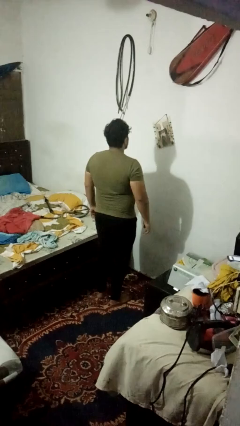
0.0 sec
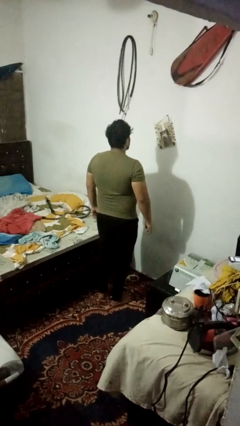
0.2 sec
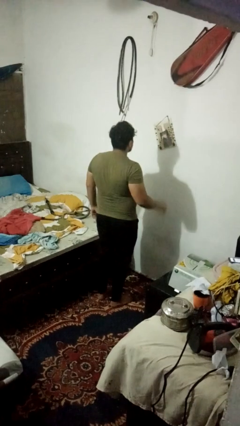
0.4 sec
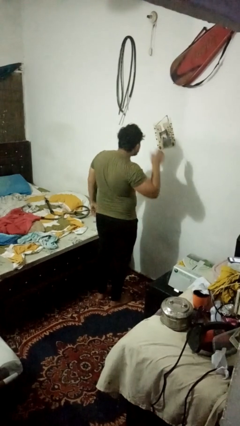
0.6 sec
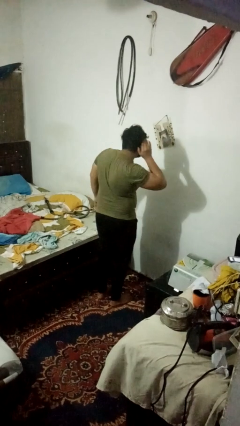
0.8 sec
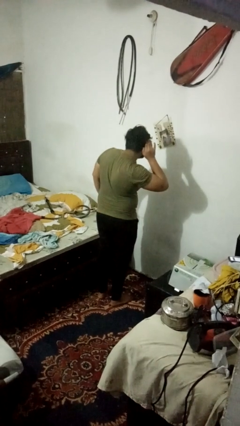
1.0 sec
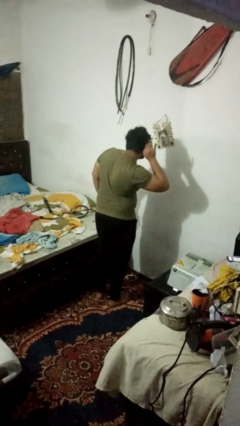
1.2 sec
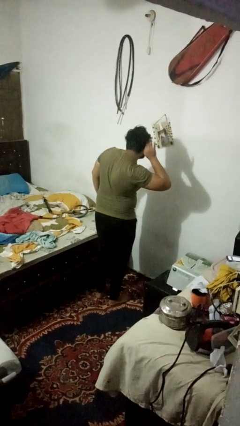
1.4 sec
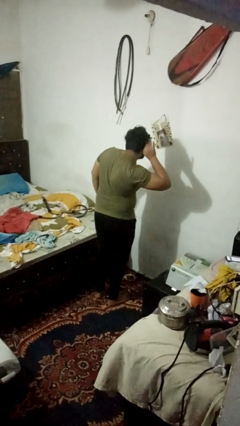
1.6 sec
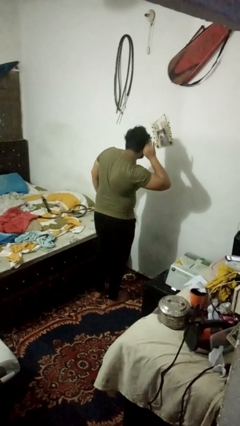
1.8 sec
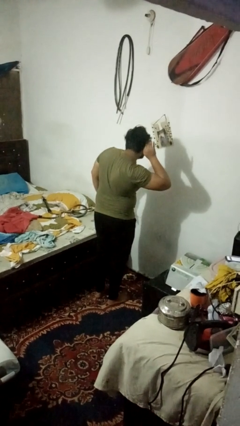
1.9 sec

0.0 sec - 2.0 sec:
person gestures listen closely

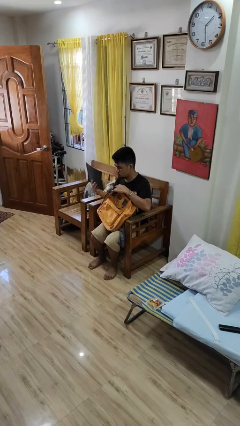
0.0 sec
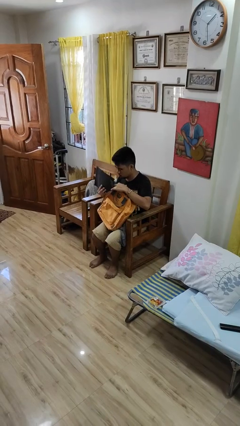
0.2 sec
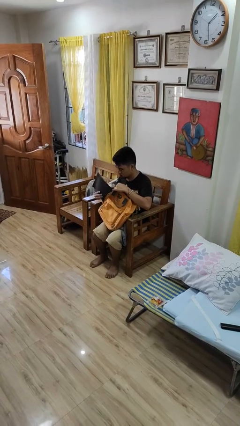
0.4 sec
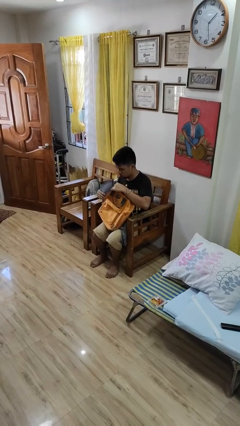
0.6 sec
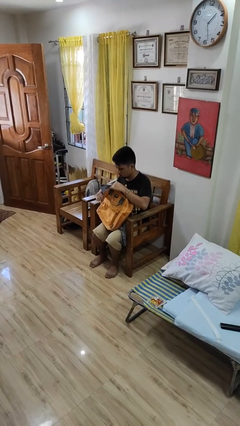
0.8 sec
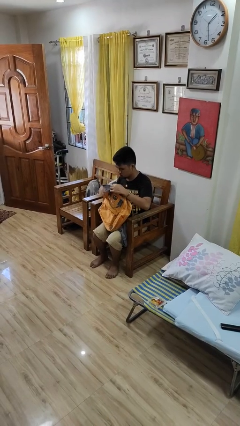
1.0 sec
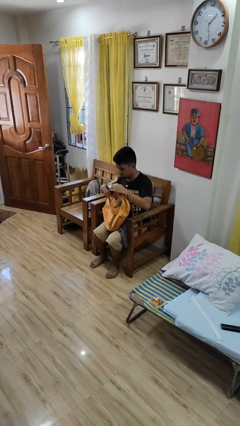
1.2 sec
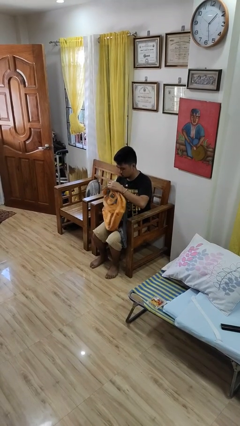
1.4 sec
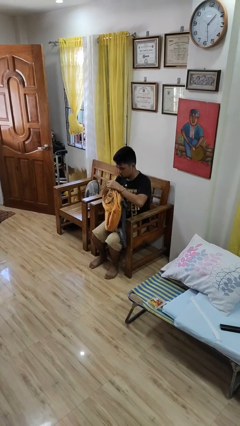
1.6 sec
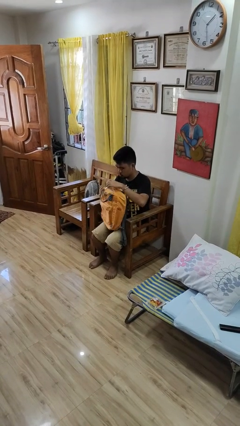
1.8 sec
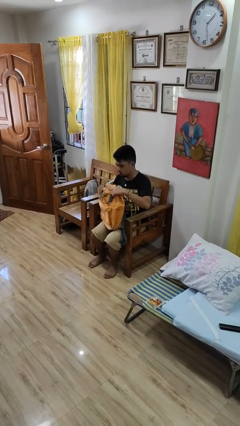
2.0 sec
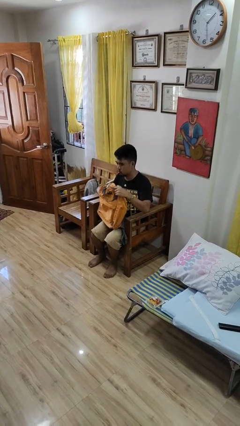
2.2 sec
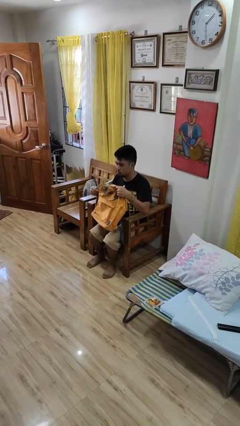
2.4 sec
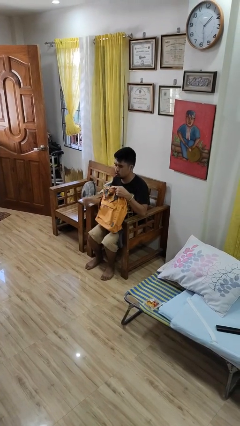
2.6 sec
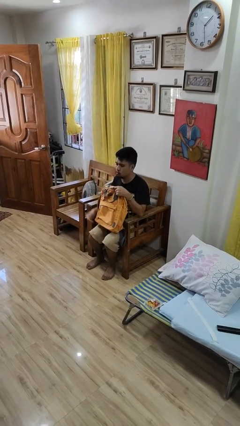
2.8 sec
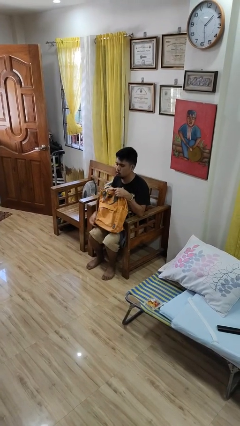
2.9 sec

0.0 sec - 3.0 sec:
person puts object into backpack

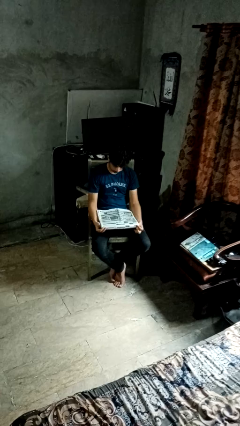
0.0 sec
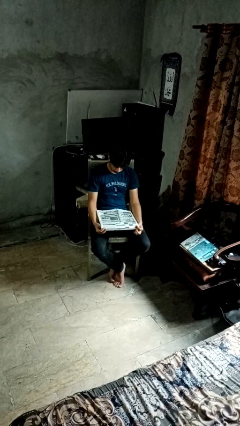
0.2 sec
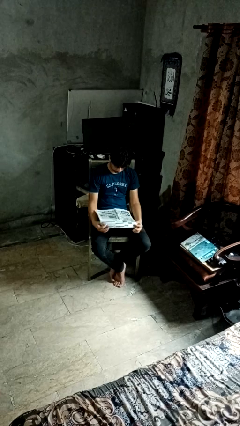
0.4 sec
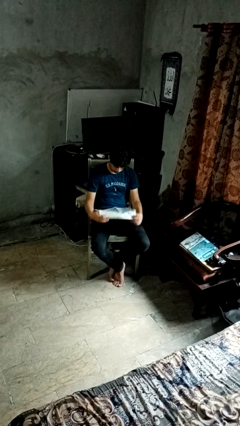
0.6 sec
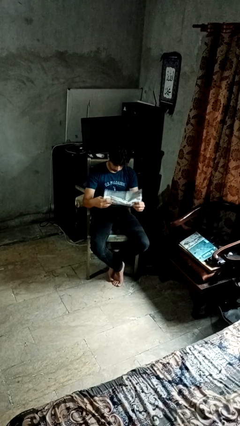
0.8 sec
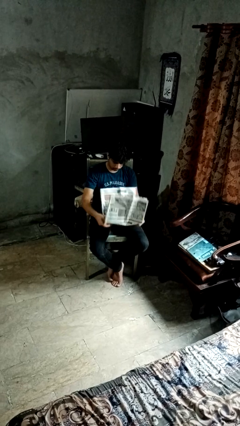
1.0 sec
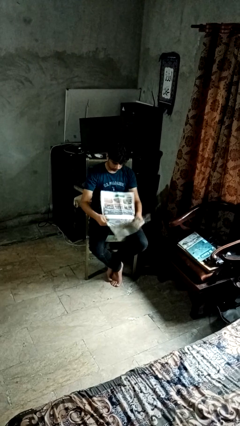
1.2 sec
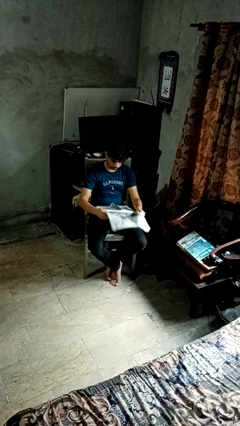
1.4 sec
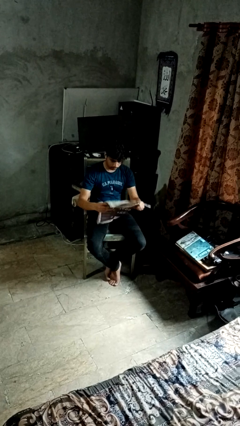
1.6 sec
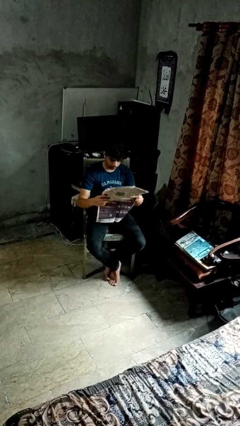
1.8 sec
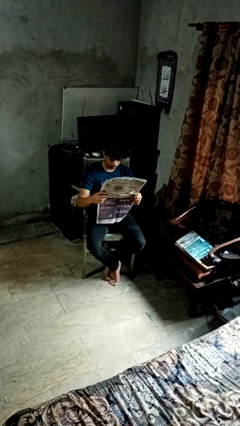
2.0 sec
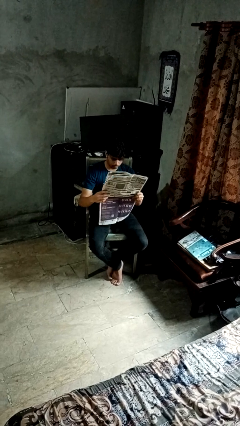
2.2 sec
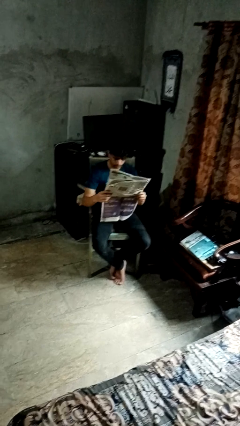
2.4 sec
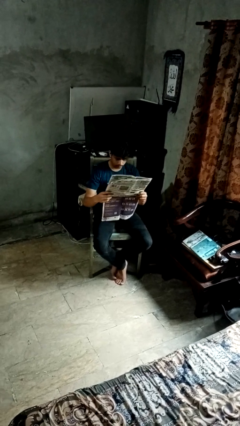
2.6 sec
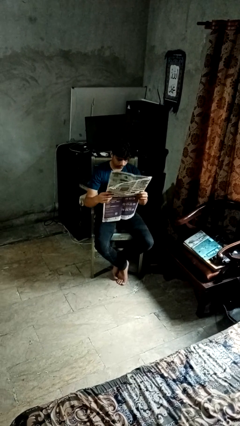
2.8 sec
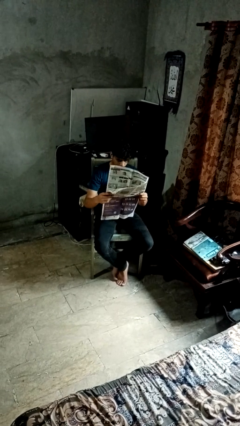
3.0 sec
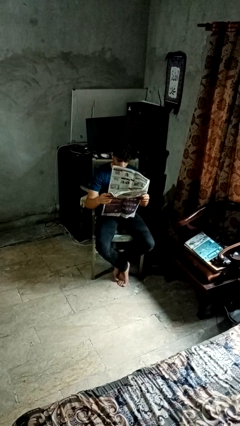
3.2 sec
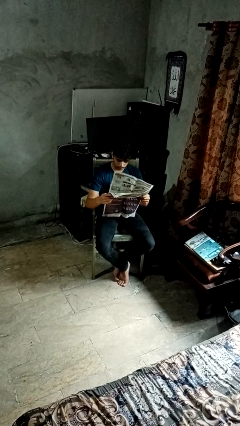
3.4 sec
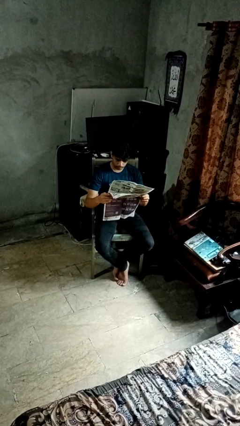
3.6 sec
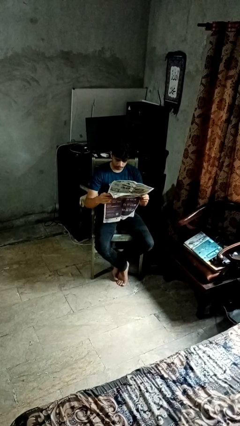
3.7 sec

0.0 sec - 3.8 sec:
person reads newspaper

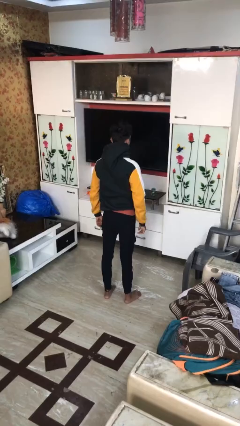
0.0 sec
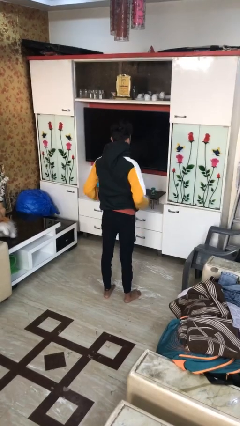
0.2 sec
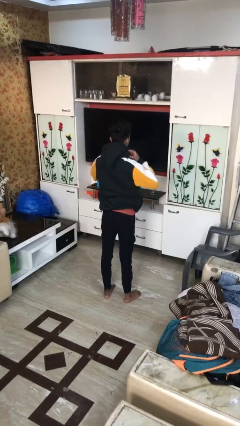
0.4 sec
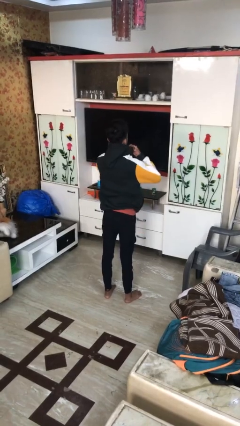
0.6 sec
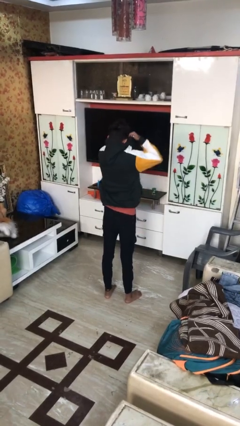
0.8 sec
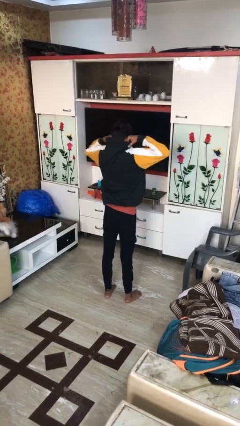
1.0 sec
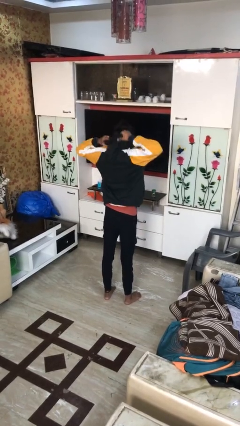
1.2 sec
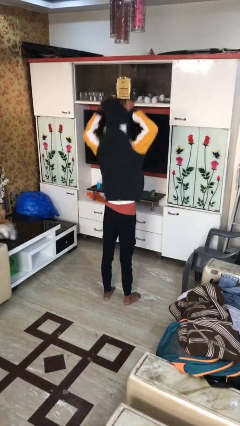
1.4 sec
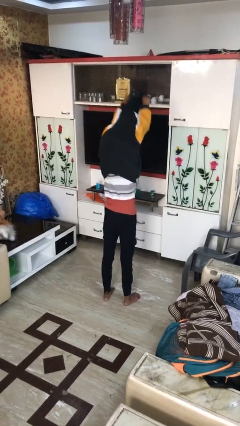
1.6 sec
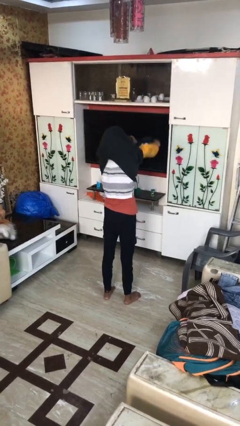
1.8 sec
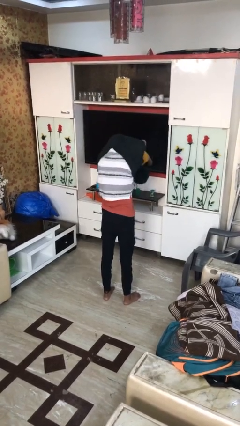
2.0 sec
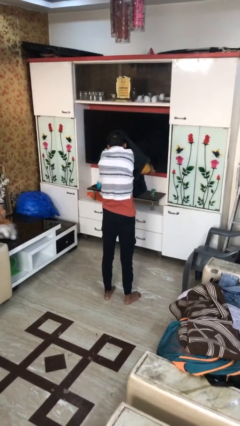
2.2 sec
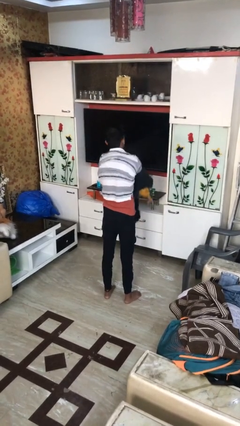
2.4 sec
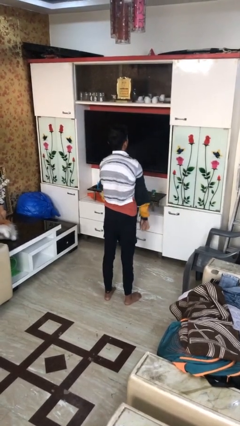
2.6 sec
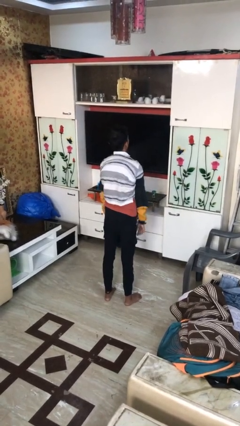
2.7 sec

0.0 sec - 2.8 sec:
person takes off hoodie

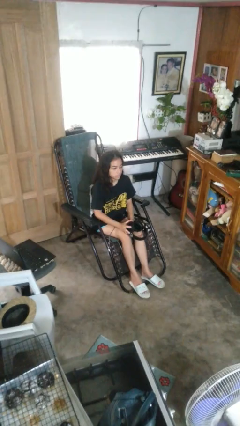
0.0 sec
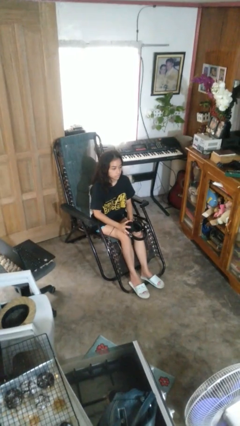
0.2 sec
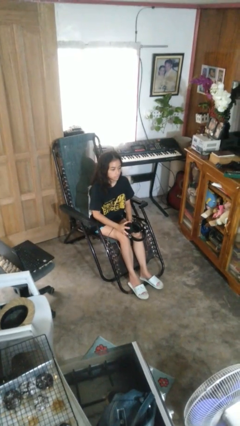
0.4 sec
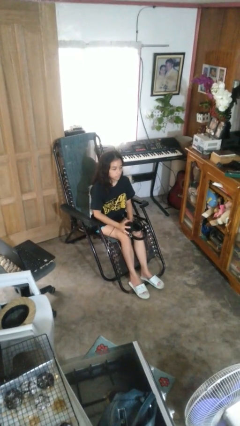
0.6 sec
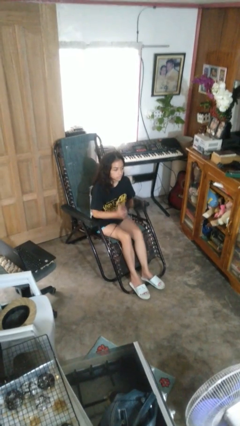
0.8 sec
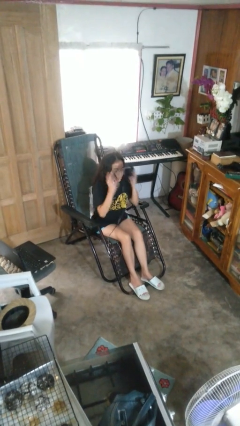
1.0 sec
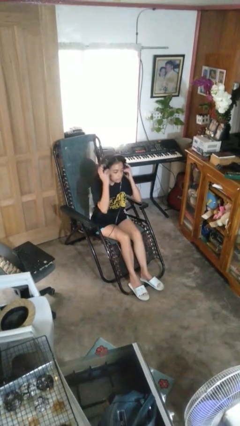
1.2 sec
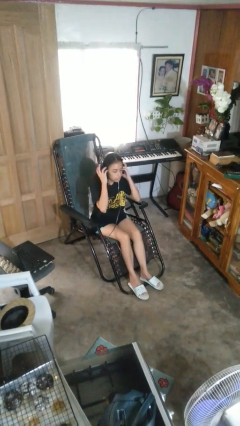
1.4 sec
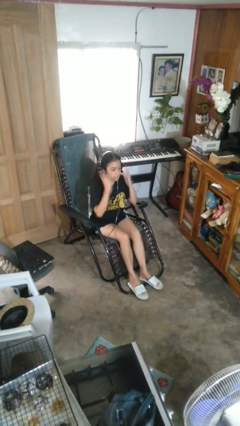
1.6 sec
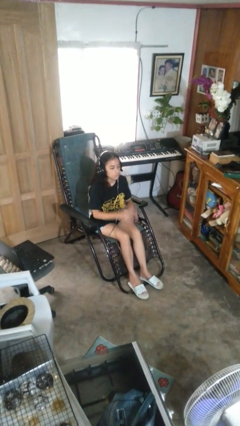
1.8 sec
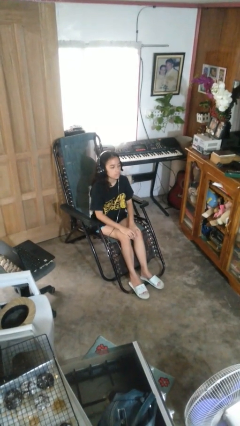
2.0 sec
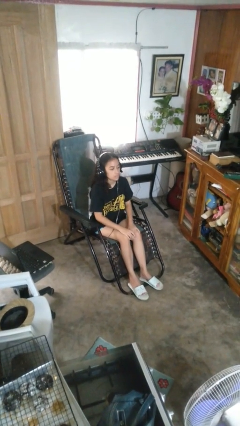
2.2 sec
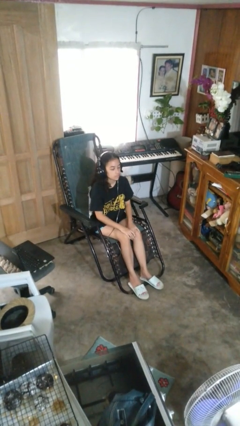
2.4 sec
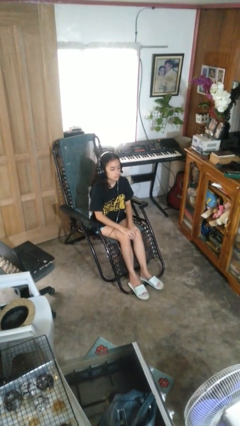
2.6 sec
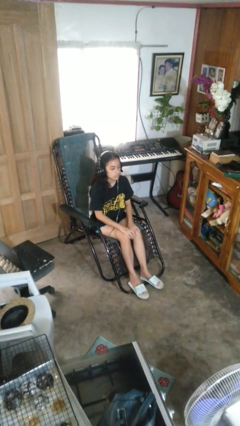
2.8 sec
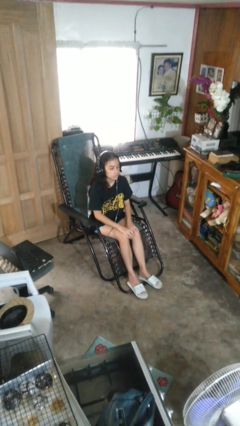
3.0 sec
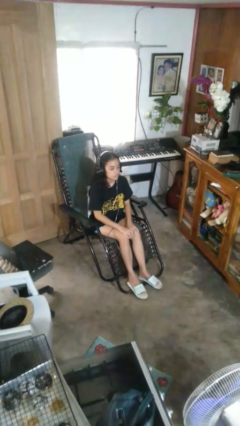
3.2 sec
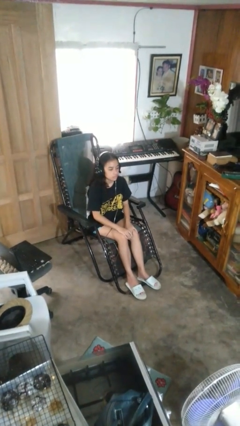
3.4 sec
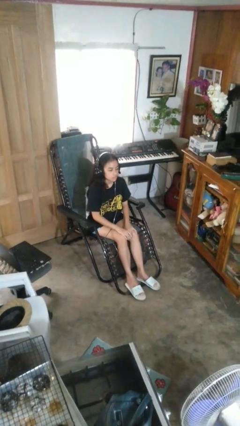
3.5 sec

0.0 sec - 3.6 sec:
person puts on headphones

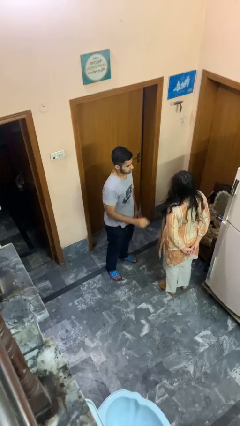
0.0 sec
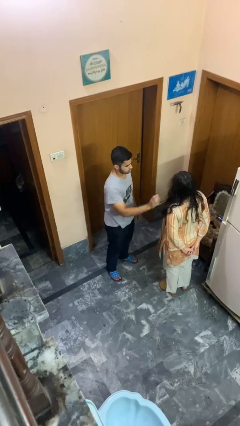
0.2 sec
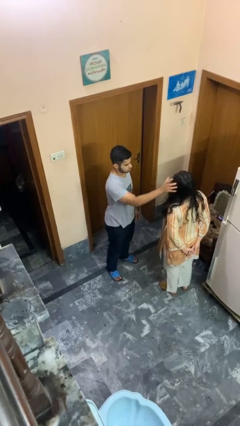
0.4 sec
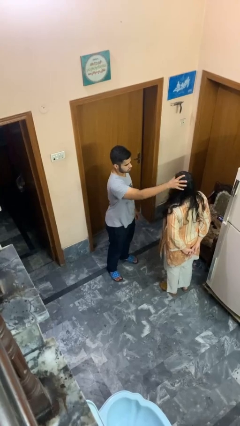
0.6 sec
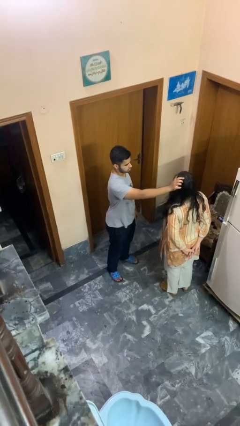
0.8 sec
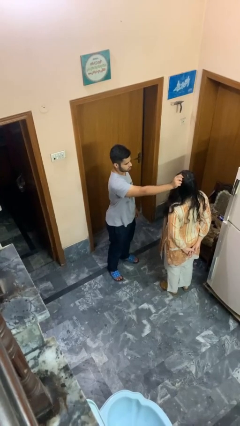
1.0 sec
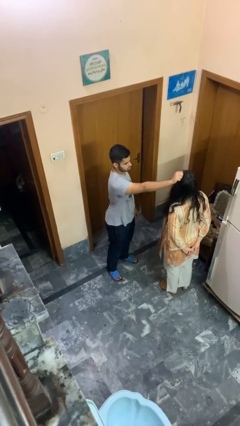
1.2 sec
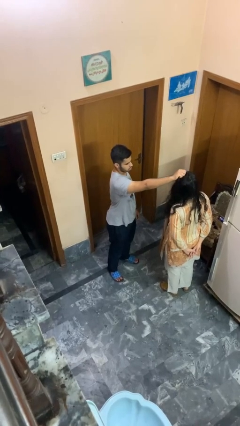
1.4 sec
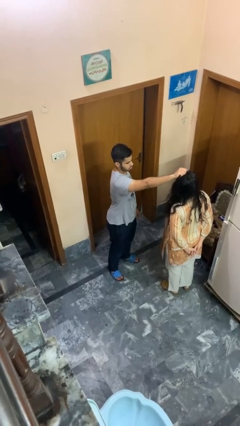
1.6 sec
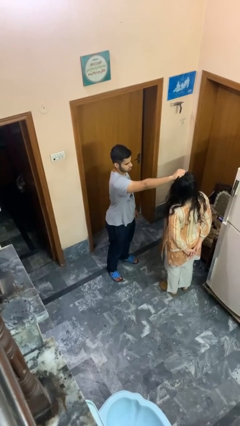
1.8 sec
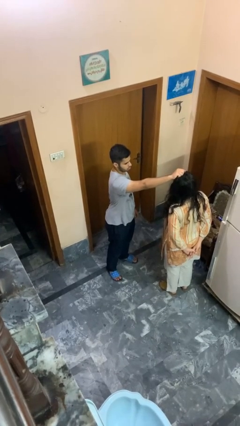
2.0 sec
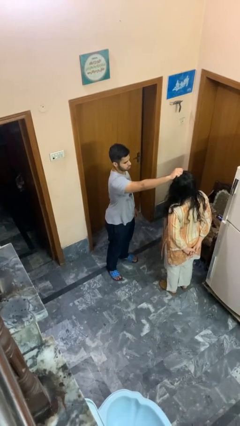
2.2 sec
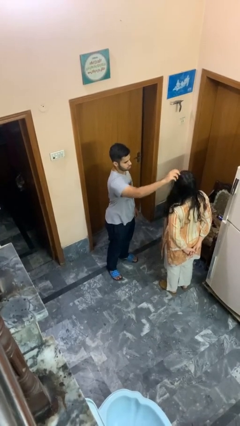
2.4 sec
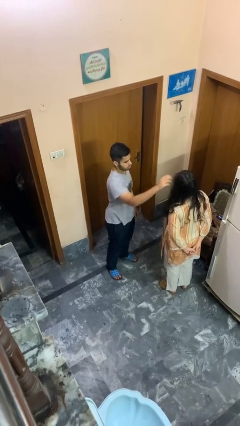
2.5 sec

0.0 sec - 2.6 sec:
person grabs person by hair
